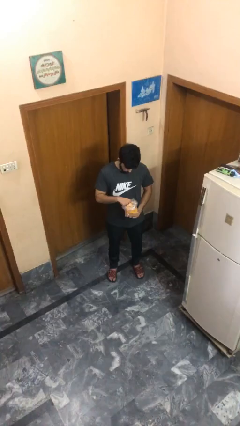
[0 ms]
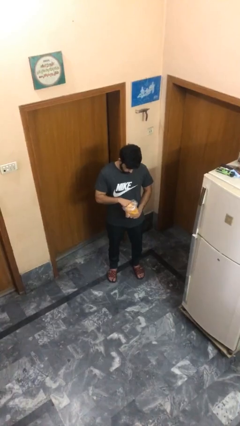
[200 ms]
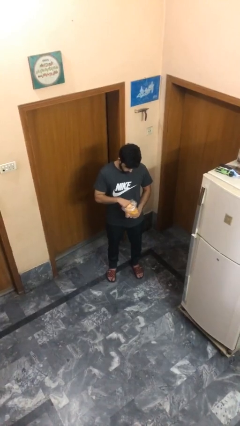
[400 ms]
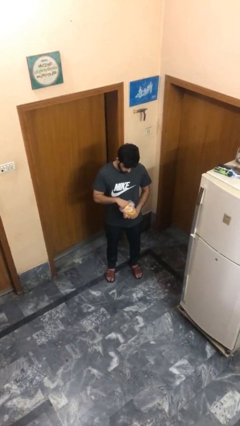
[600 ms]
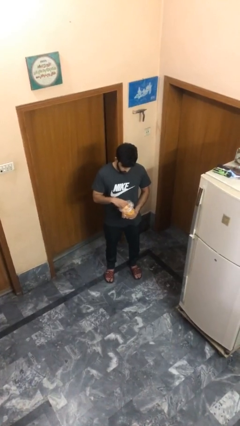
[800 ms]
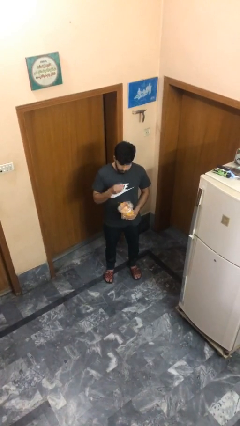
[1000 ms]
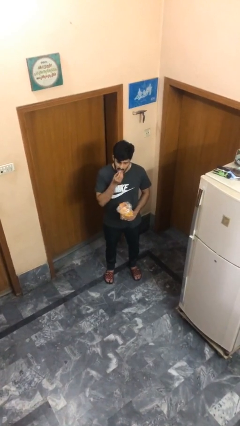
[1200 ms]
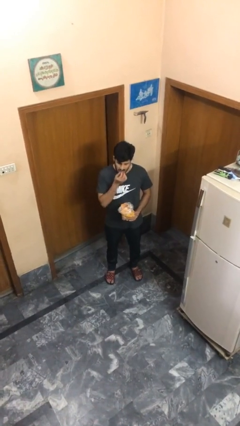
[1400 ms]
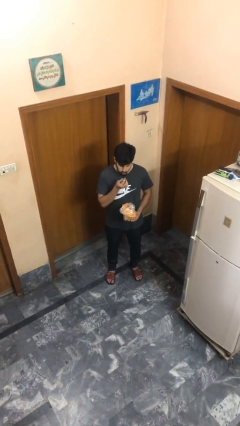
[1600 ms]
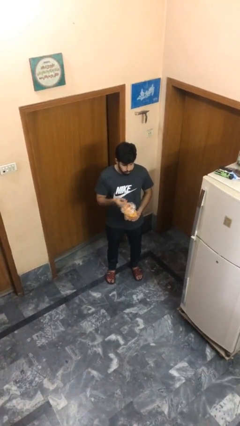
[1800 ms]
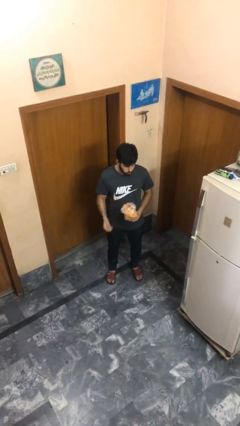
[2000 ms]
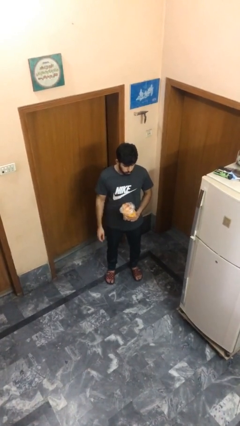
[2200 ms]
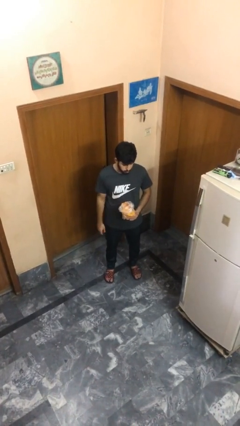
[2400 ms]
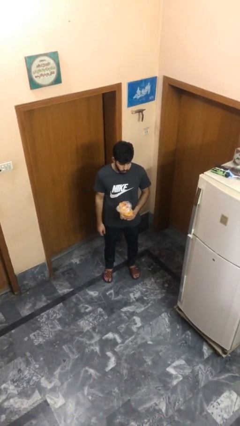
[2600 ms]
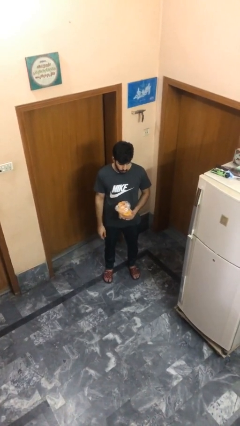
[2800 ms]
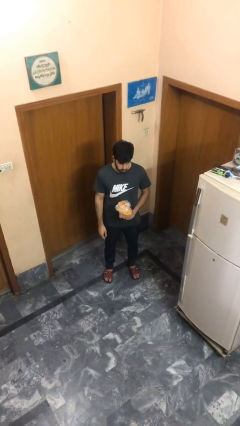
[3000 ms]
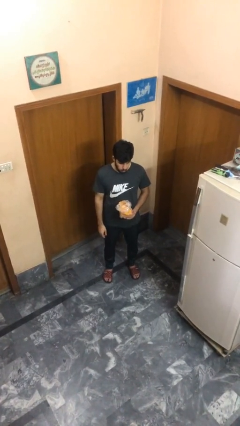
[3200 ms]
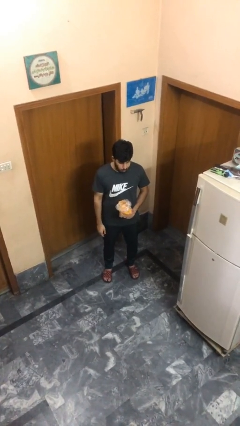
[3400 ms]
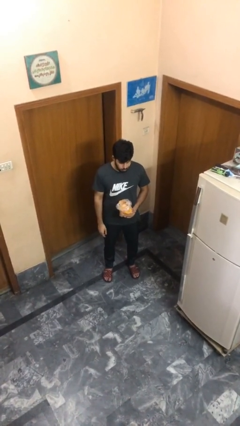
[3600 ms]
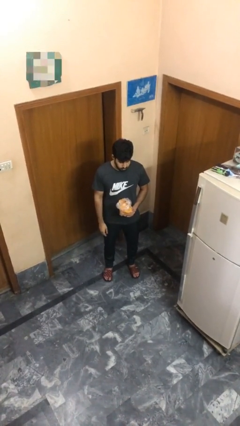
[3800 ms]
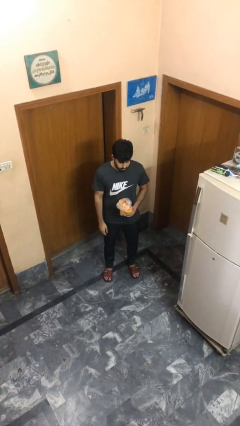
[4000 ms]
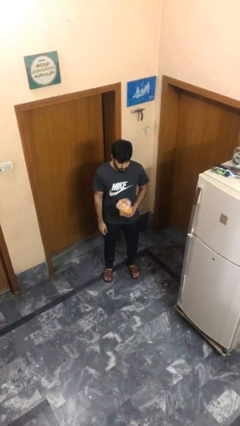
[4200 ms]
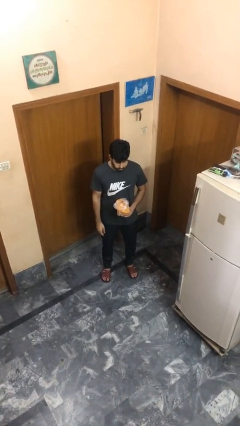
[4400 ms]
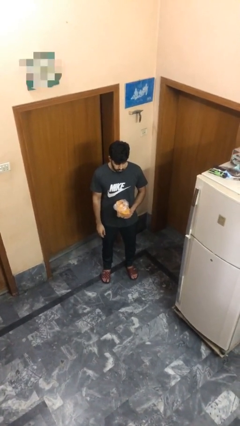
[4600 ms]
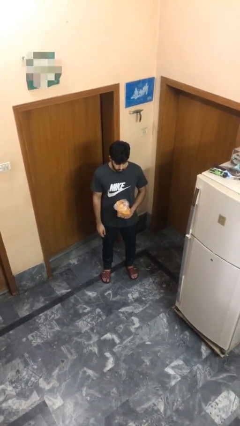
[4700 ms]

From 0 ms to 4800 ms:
person eats snack from bag

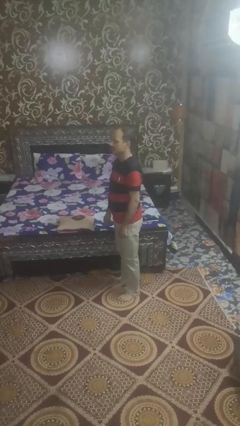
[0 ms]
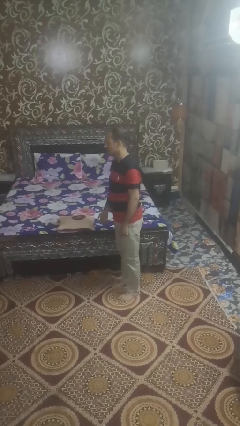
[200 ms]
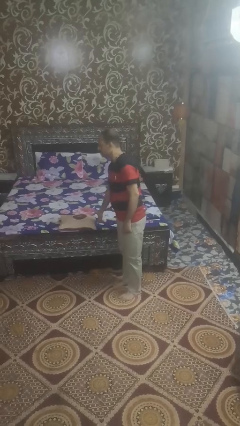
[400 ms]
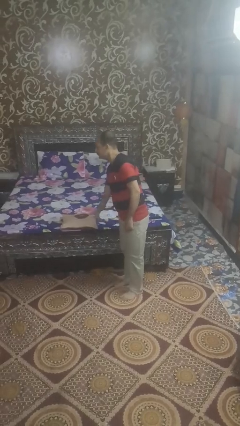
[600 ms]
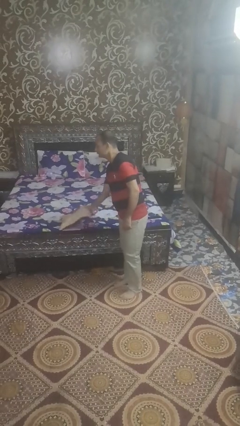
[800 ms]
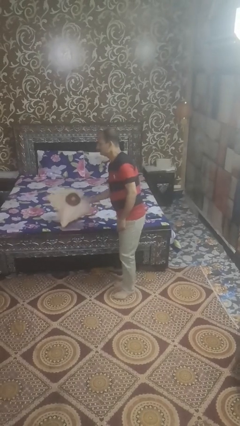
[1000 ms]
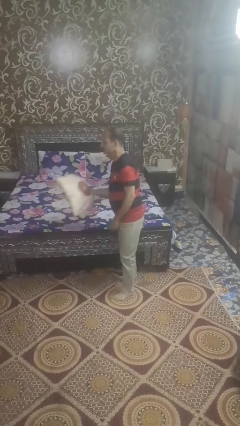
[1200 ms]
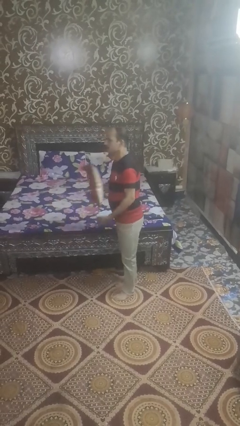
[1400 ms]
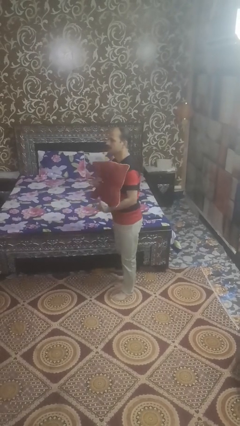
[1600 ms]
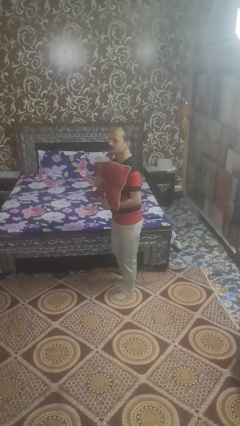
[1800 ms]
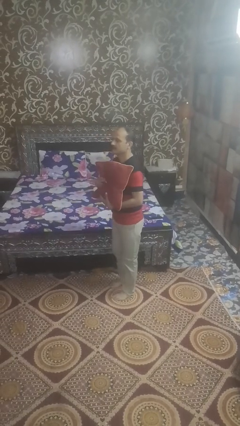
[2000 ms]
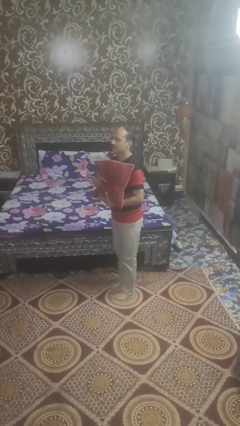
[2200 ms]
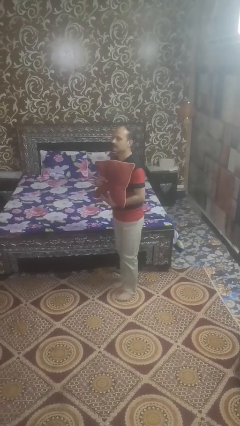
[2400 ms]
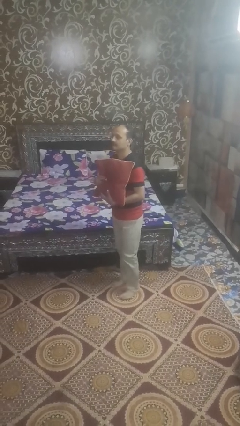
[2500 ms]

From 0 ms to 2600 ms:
person picks up object from bed

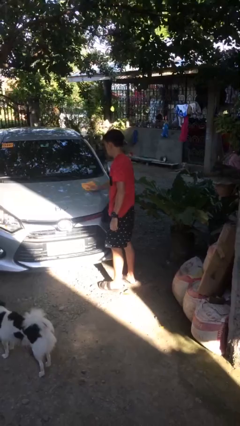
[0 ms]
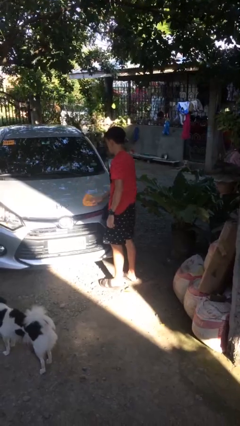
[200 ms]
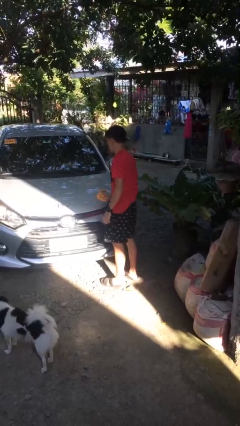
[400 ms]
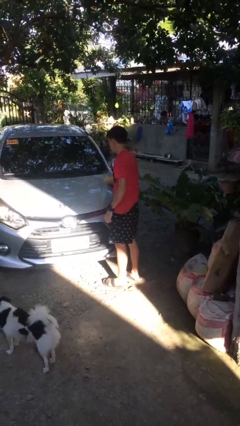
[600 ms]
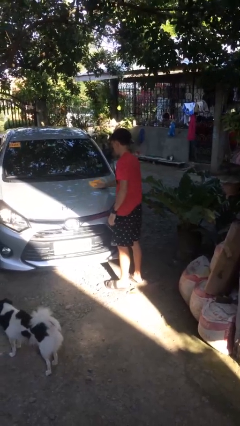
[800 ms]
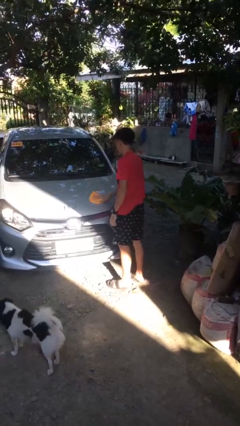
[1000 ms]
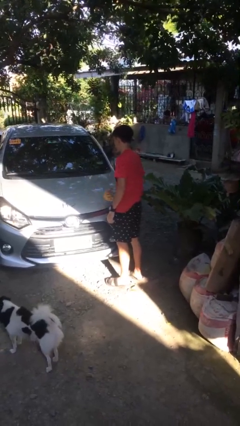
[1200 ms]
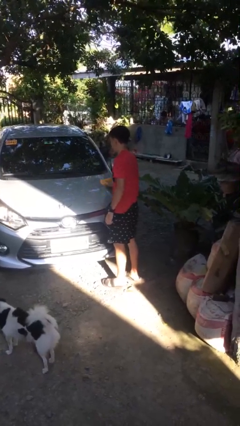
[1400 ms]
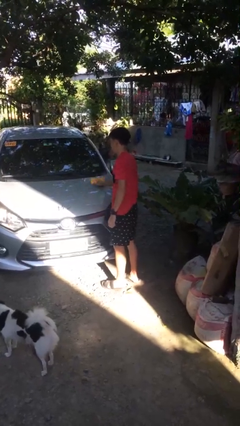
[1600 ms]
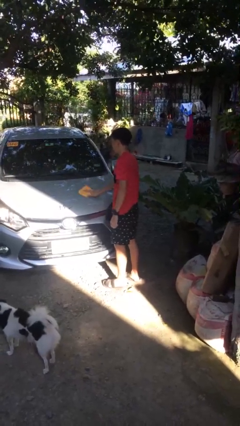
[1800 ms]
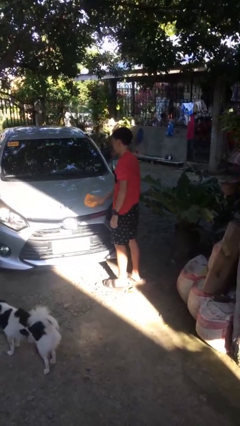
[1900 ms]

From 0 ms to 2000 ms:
person polishes car with rag

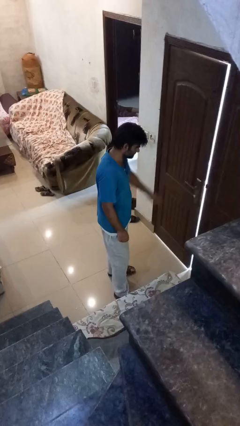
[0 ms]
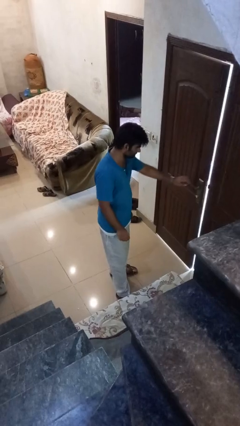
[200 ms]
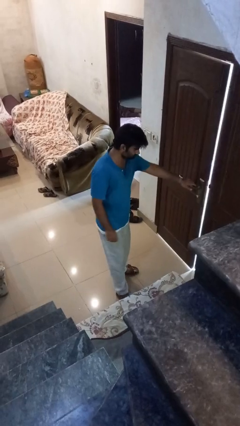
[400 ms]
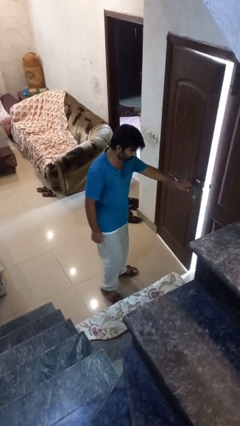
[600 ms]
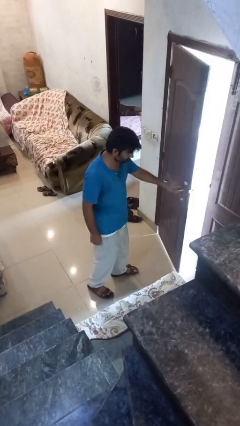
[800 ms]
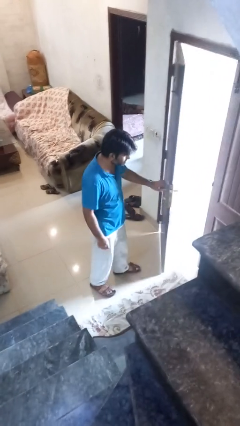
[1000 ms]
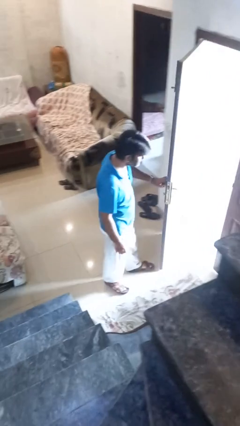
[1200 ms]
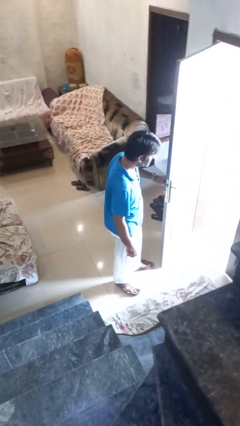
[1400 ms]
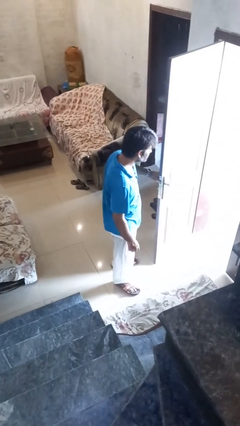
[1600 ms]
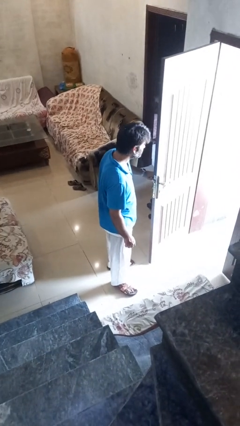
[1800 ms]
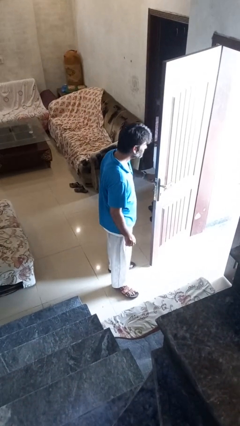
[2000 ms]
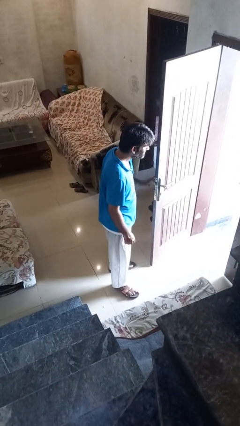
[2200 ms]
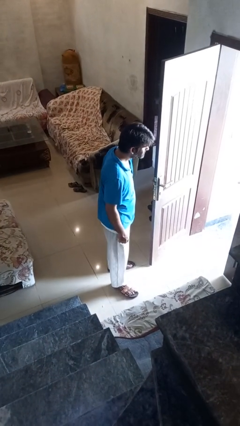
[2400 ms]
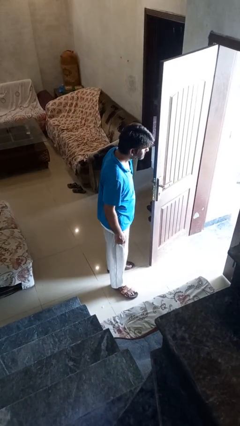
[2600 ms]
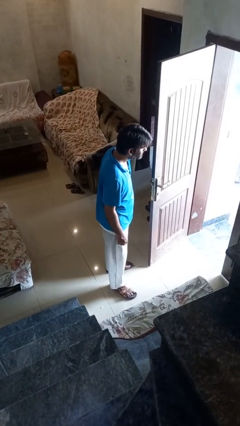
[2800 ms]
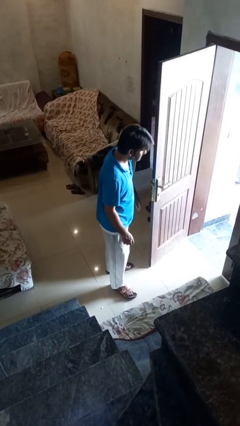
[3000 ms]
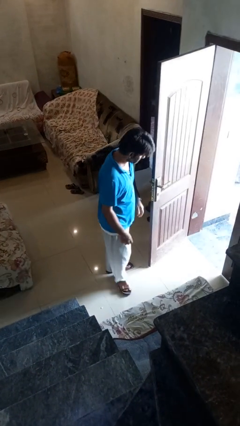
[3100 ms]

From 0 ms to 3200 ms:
person opens facility door

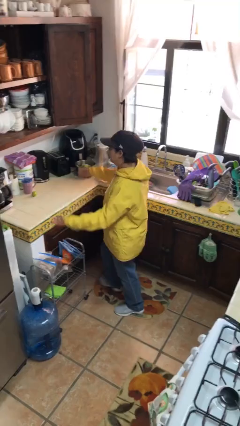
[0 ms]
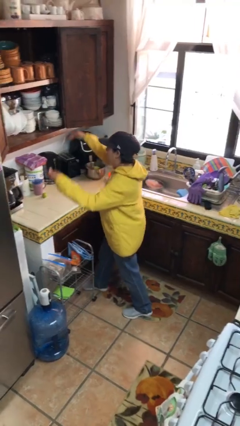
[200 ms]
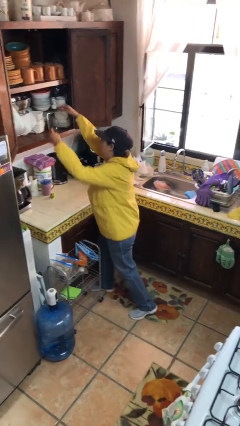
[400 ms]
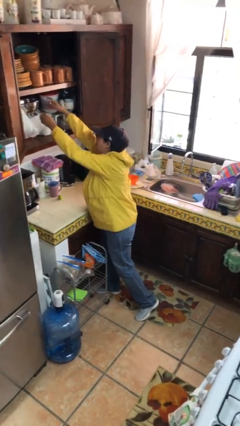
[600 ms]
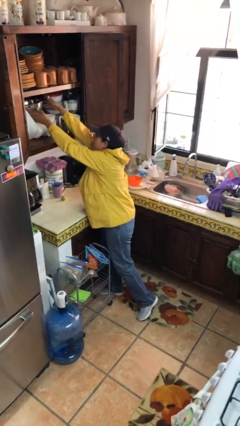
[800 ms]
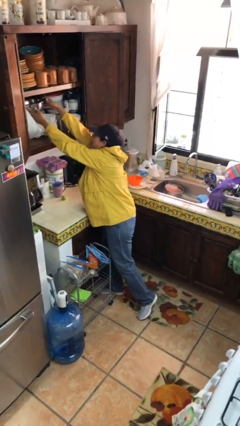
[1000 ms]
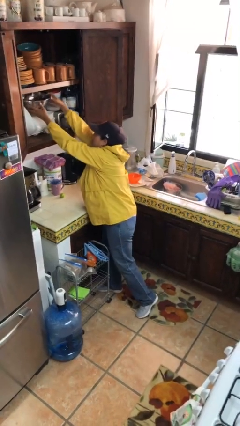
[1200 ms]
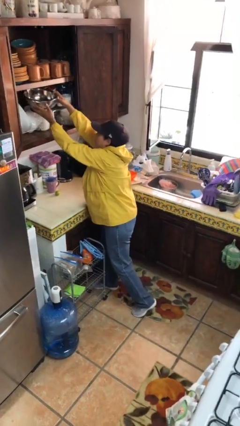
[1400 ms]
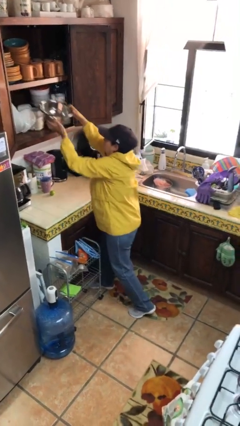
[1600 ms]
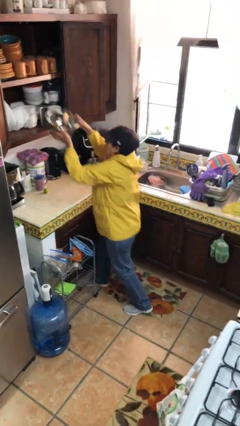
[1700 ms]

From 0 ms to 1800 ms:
person picks up object from cabinet

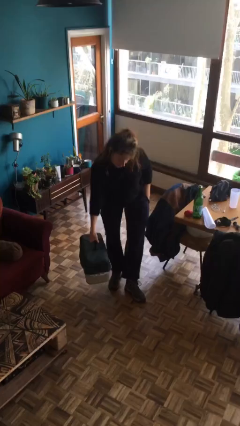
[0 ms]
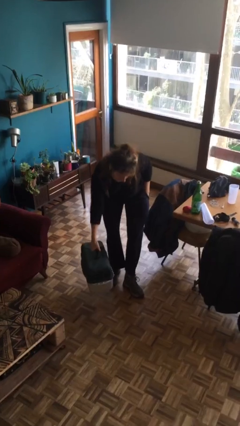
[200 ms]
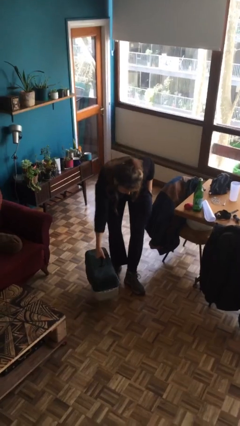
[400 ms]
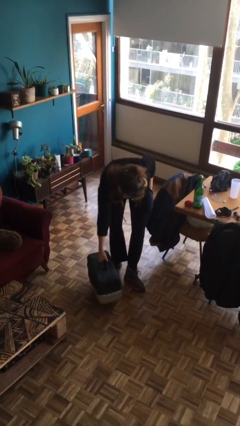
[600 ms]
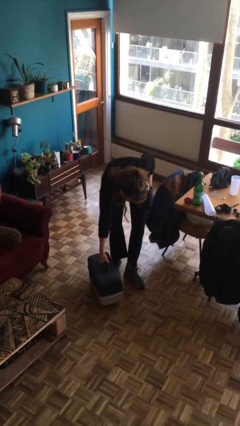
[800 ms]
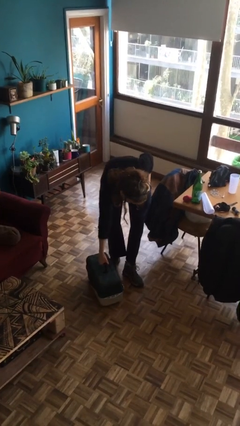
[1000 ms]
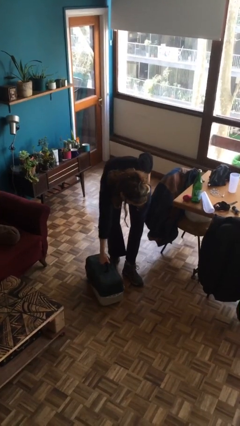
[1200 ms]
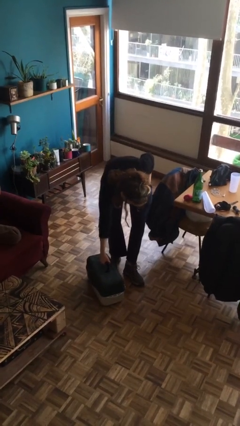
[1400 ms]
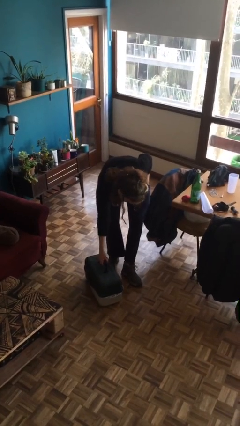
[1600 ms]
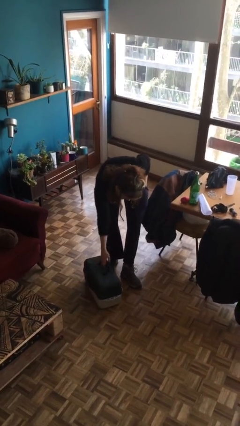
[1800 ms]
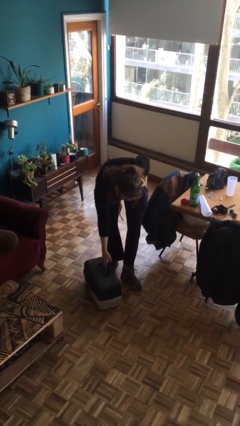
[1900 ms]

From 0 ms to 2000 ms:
person puts down object on floor

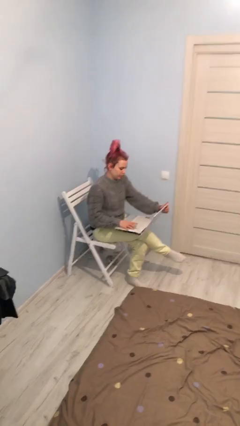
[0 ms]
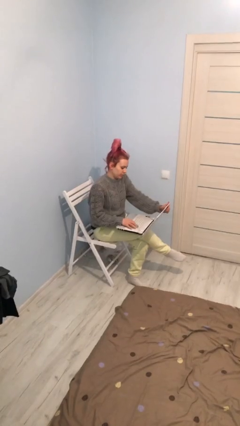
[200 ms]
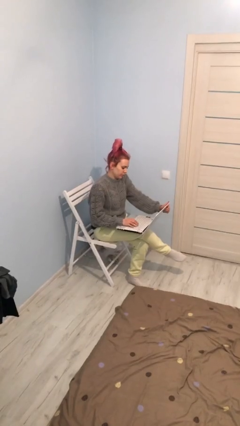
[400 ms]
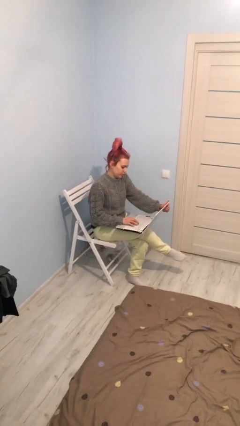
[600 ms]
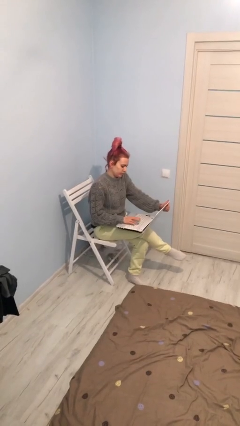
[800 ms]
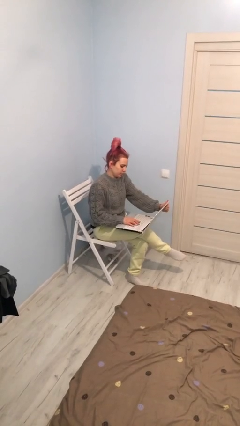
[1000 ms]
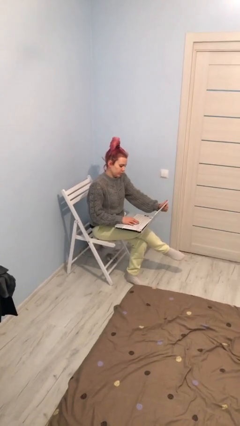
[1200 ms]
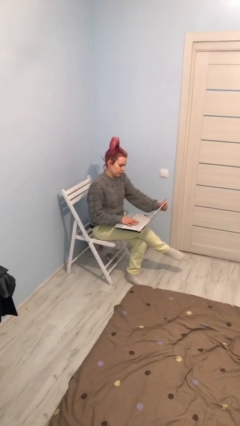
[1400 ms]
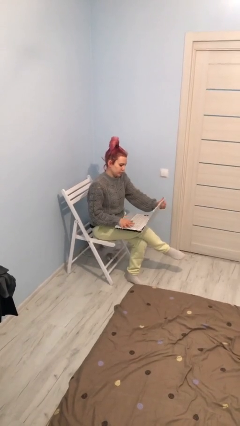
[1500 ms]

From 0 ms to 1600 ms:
person interacts with laptop
